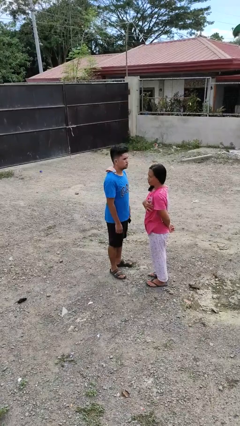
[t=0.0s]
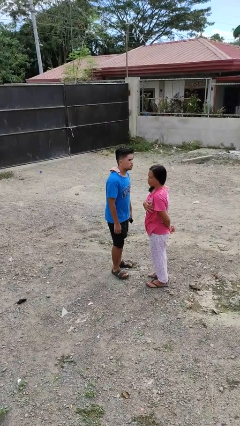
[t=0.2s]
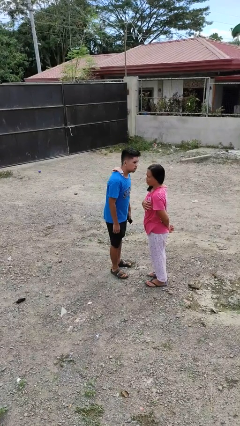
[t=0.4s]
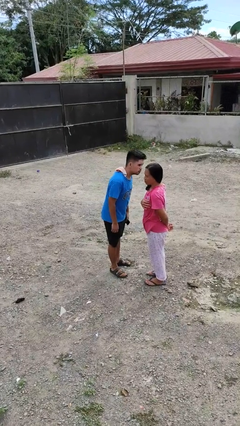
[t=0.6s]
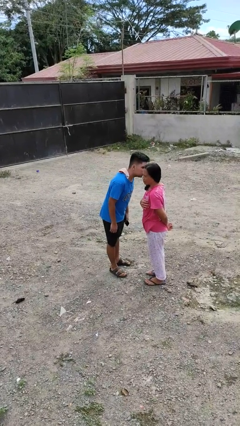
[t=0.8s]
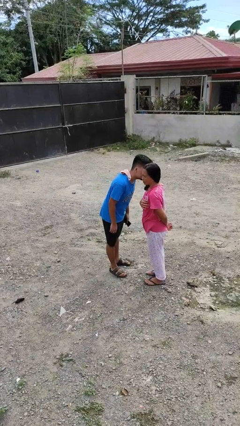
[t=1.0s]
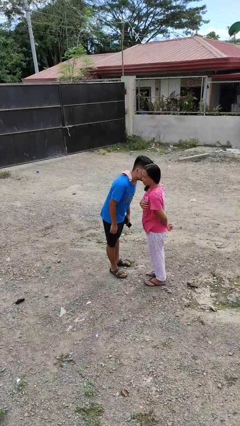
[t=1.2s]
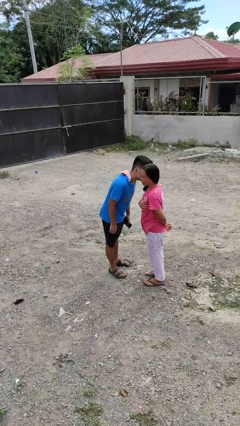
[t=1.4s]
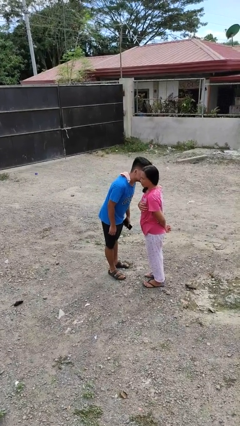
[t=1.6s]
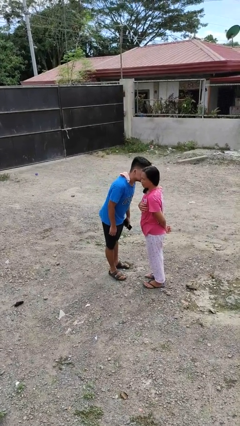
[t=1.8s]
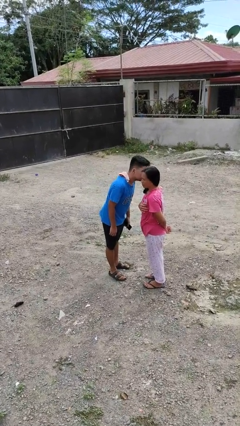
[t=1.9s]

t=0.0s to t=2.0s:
person kisses cheek of person

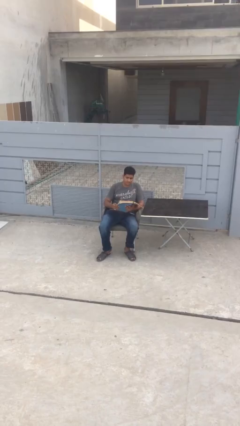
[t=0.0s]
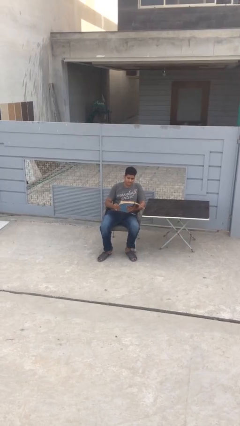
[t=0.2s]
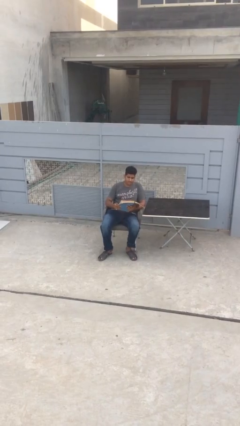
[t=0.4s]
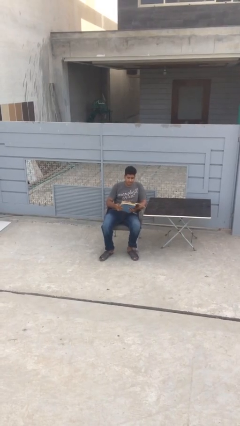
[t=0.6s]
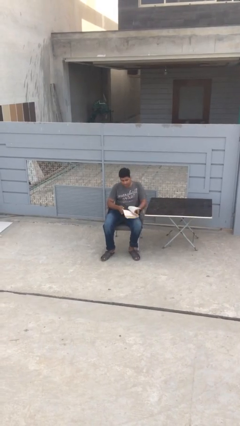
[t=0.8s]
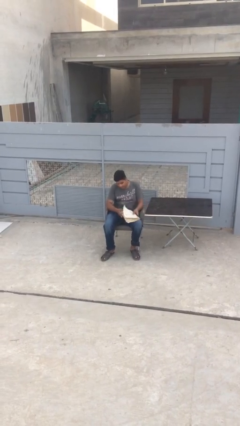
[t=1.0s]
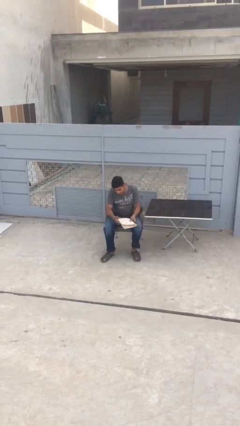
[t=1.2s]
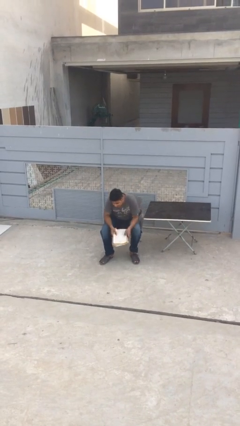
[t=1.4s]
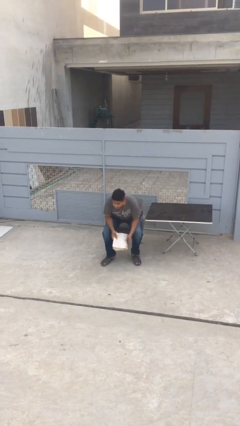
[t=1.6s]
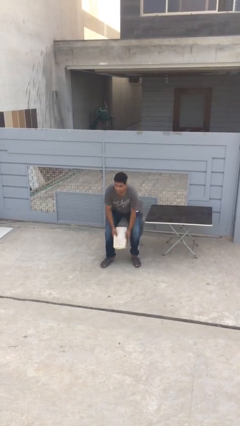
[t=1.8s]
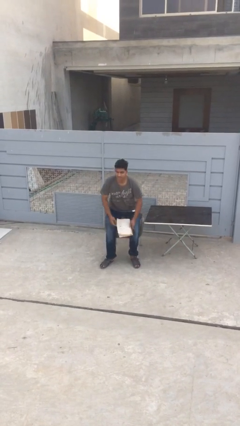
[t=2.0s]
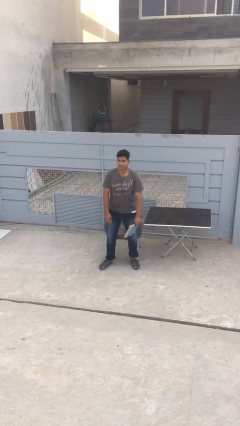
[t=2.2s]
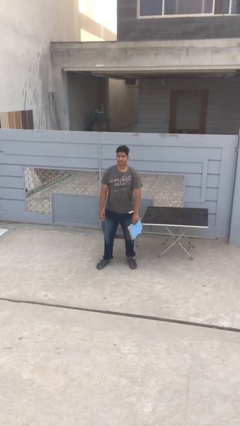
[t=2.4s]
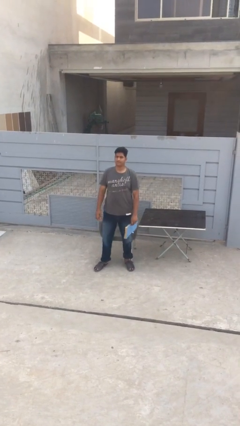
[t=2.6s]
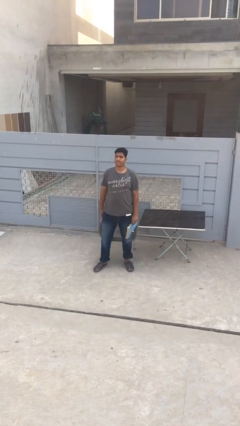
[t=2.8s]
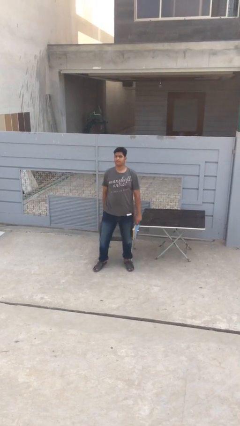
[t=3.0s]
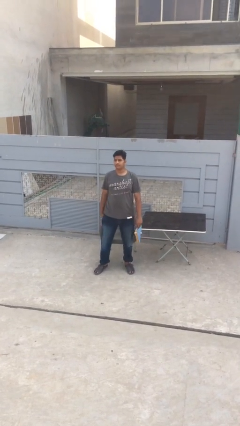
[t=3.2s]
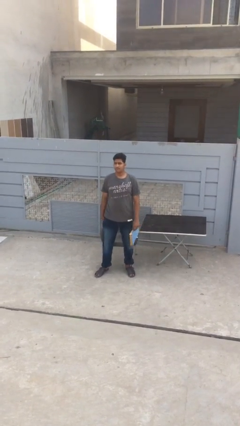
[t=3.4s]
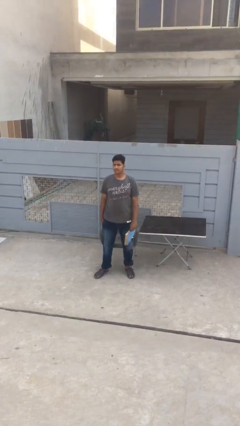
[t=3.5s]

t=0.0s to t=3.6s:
person stands up

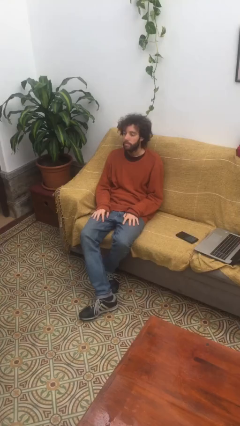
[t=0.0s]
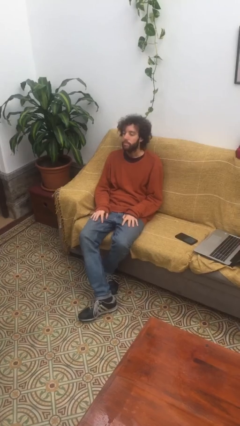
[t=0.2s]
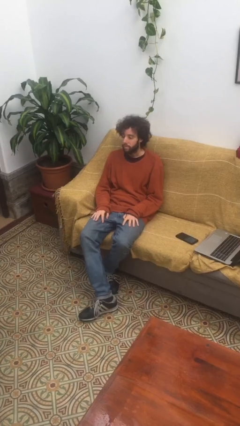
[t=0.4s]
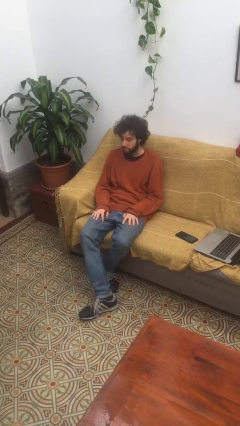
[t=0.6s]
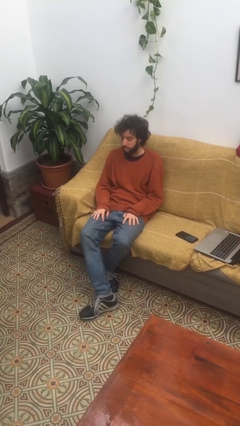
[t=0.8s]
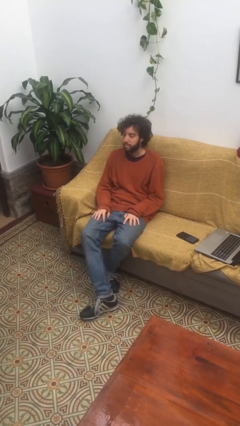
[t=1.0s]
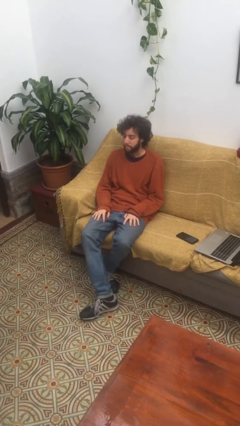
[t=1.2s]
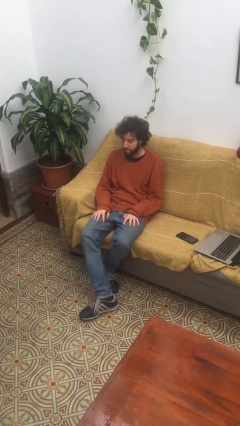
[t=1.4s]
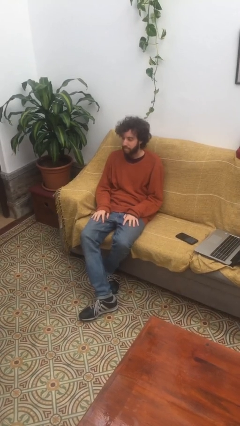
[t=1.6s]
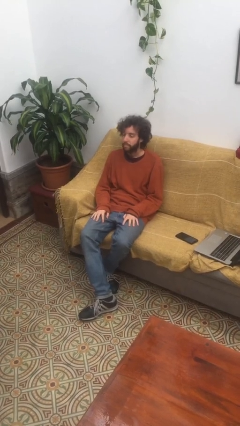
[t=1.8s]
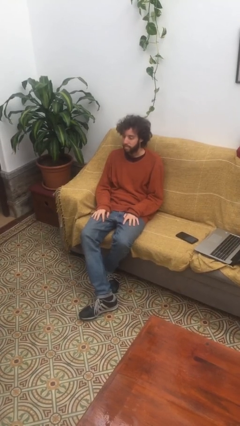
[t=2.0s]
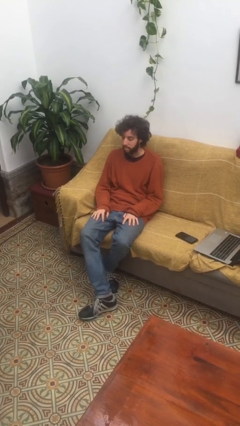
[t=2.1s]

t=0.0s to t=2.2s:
person nods head

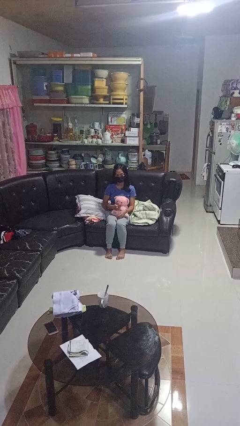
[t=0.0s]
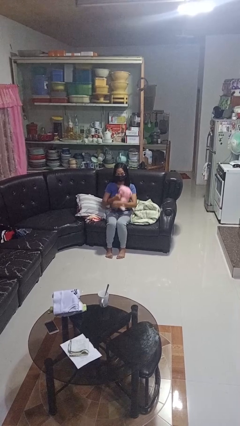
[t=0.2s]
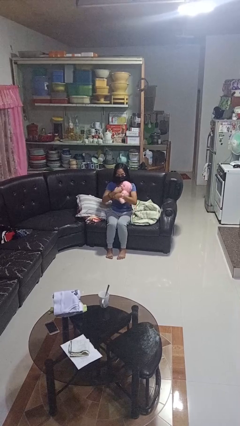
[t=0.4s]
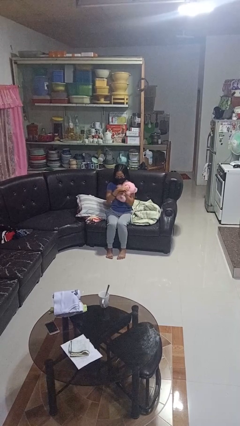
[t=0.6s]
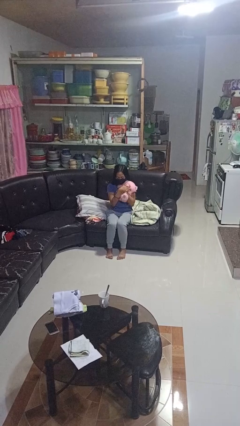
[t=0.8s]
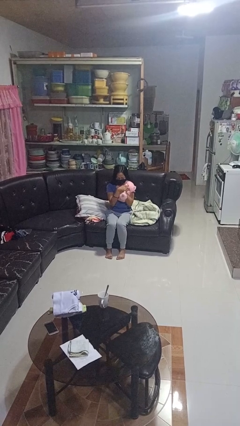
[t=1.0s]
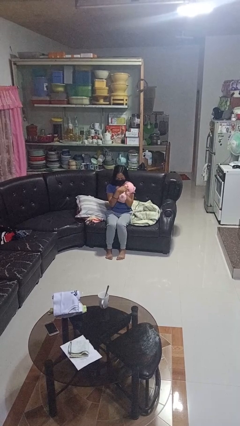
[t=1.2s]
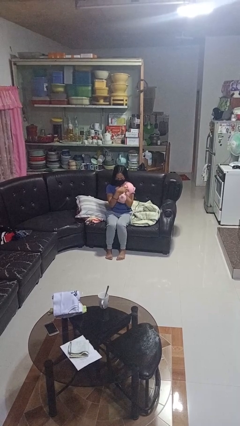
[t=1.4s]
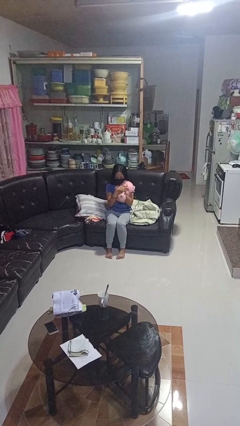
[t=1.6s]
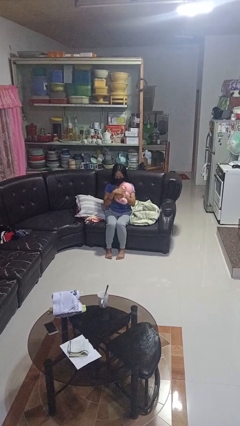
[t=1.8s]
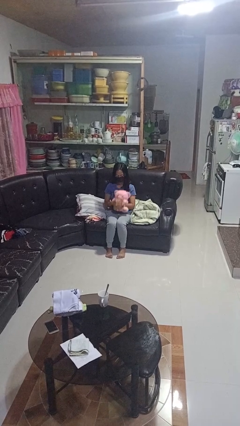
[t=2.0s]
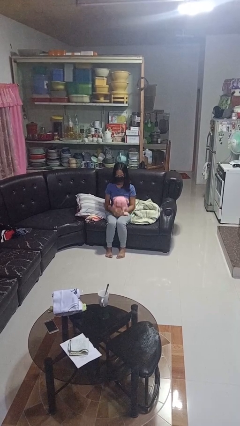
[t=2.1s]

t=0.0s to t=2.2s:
person hugs stuffed animal

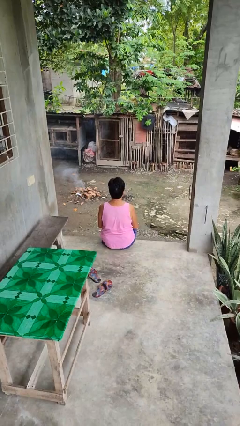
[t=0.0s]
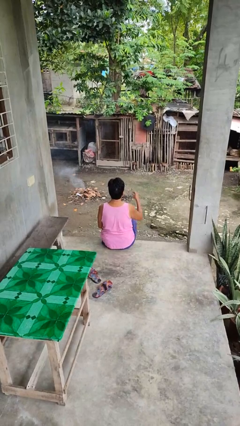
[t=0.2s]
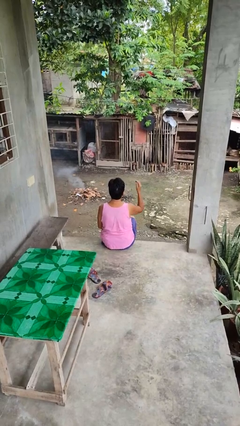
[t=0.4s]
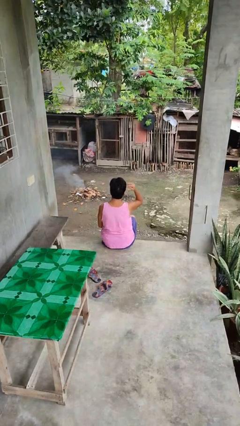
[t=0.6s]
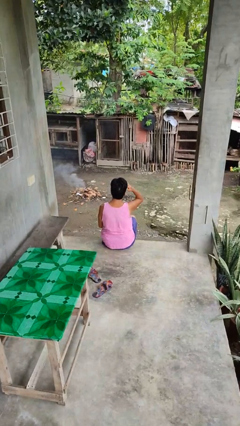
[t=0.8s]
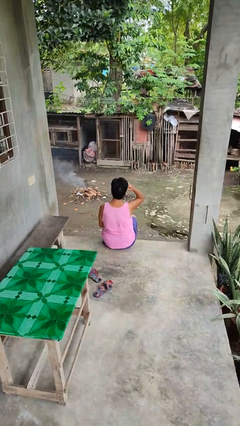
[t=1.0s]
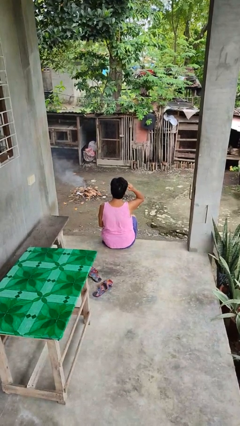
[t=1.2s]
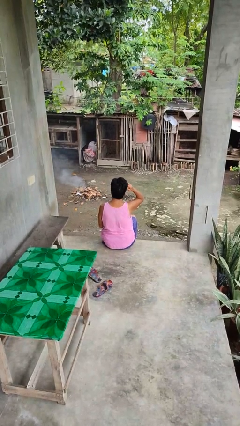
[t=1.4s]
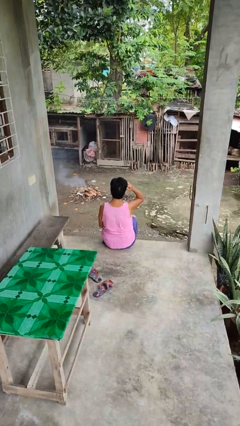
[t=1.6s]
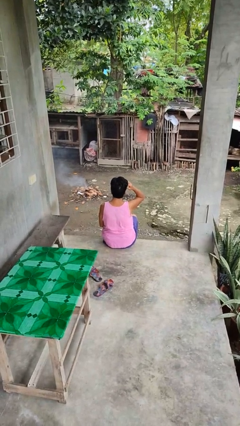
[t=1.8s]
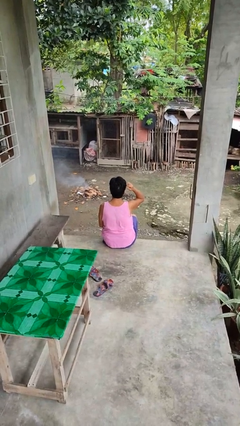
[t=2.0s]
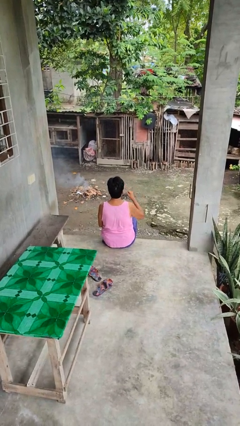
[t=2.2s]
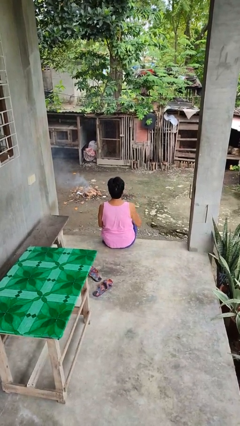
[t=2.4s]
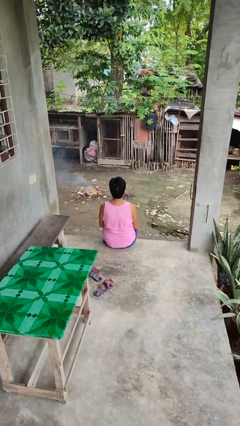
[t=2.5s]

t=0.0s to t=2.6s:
person scratches face

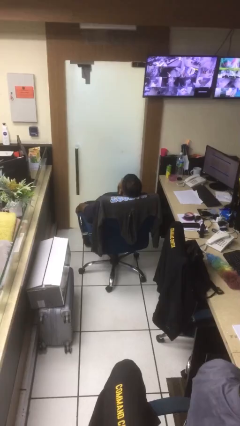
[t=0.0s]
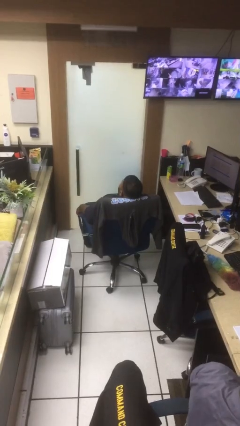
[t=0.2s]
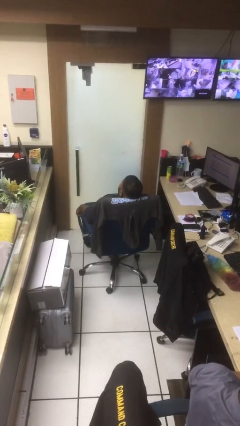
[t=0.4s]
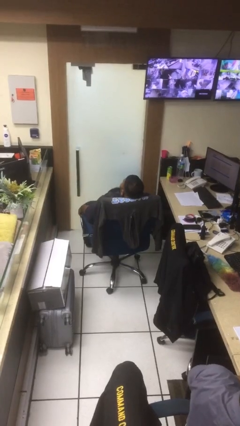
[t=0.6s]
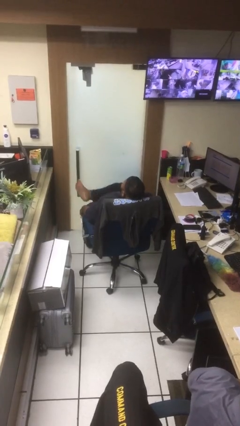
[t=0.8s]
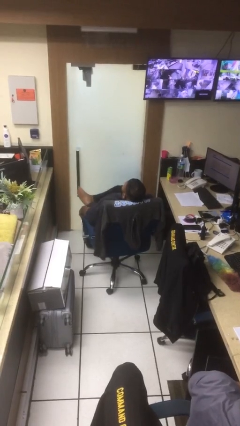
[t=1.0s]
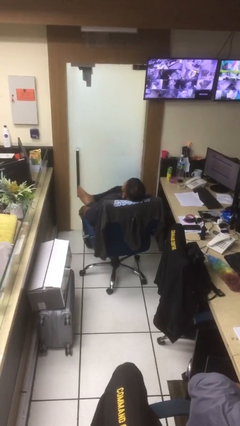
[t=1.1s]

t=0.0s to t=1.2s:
person crosses legs

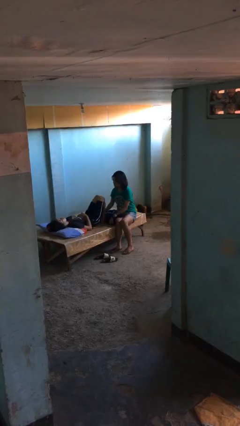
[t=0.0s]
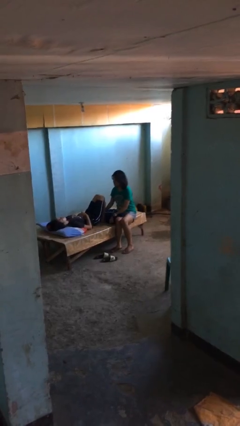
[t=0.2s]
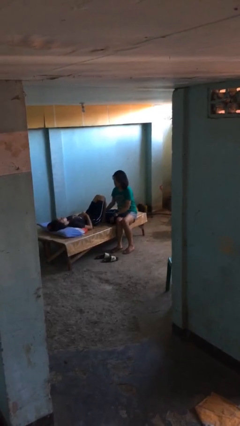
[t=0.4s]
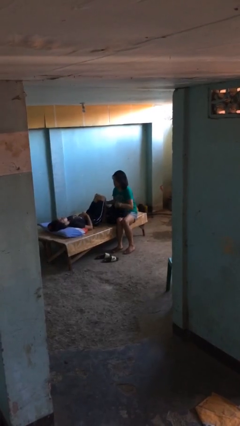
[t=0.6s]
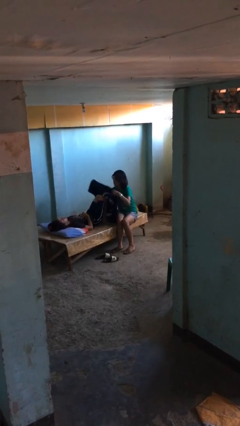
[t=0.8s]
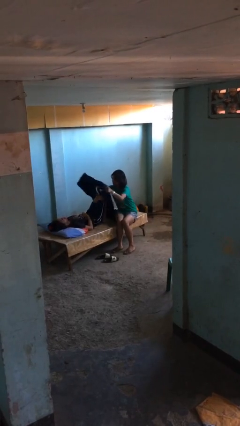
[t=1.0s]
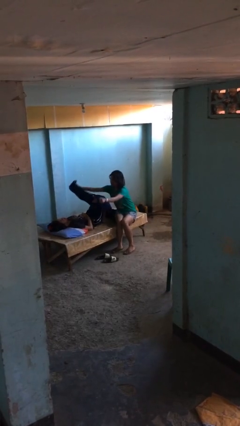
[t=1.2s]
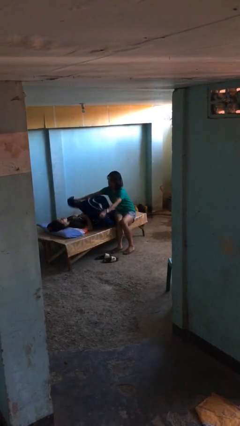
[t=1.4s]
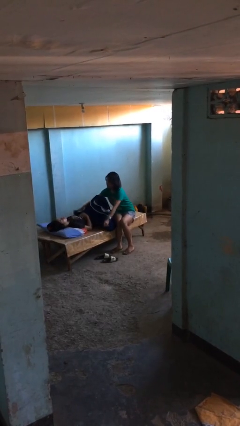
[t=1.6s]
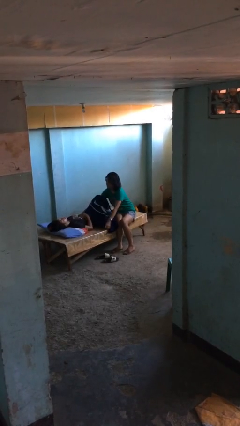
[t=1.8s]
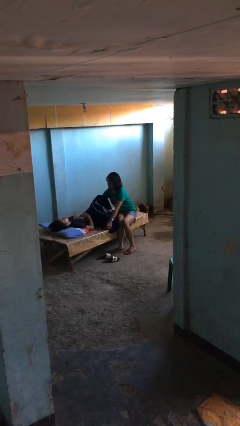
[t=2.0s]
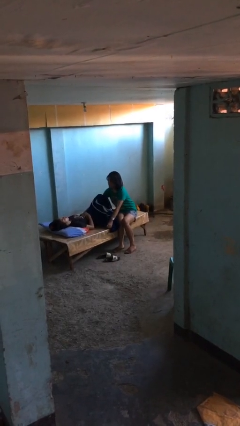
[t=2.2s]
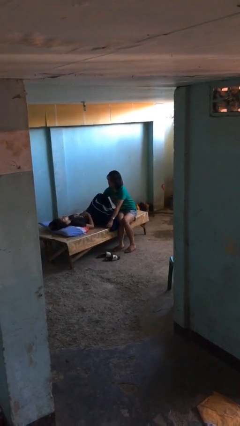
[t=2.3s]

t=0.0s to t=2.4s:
person covers friend with blanket

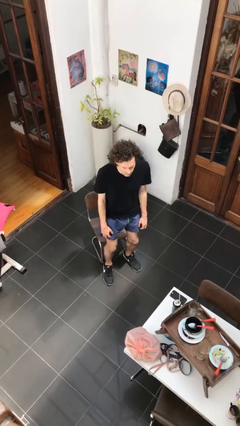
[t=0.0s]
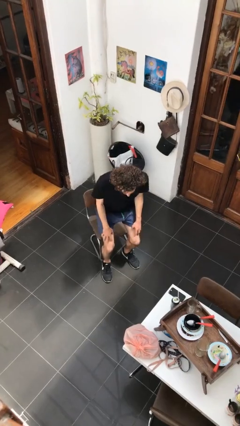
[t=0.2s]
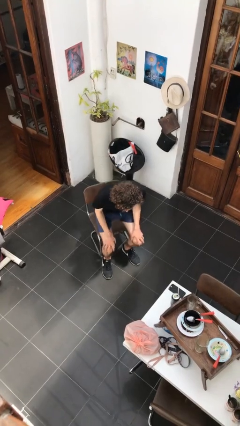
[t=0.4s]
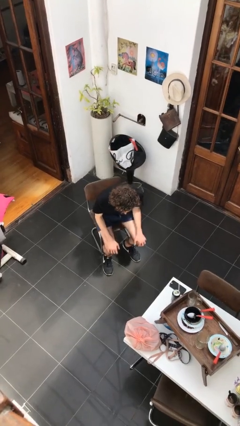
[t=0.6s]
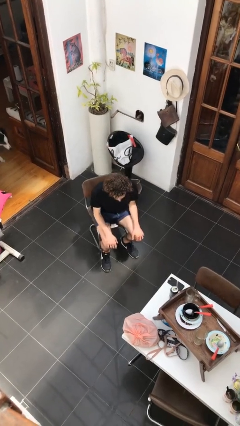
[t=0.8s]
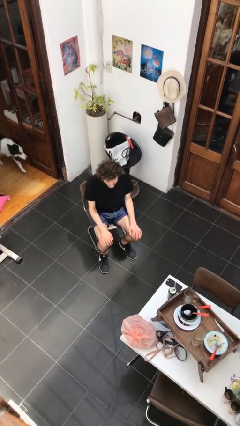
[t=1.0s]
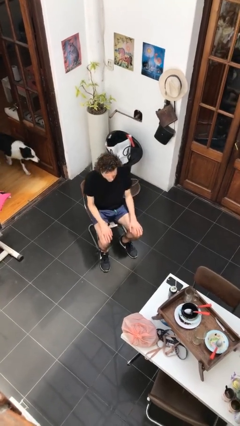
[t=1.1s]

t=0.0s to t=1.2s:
person sits down

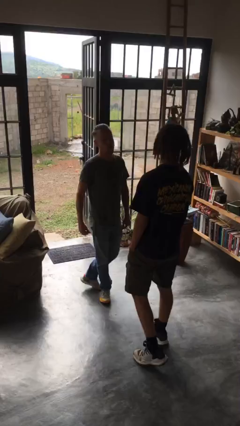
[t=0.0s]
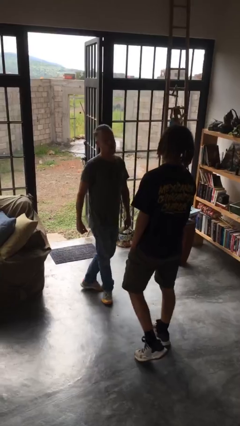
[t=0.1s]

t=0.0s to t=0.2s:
person shoves person
